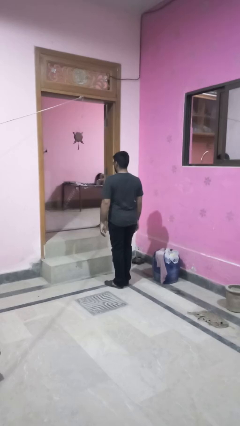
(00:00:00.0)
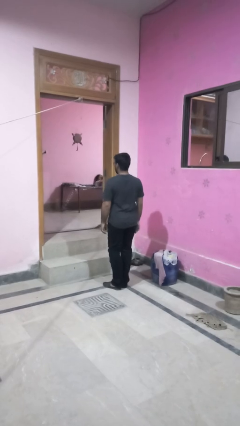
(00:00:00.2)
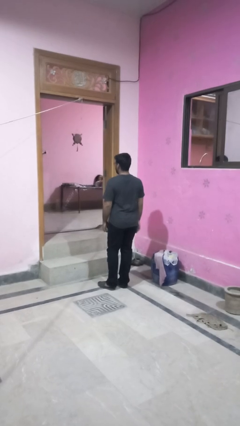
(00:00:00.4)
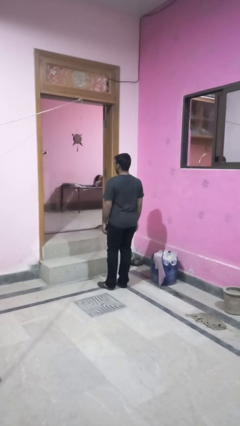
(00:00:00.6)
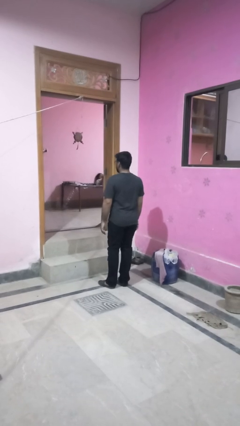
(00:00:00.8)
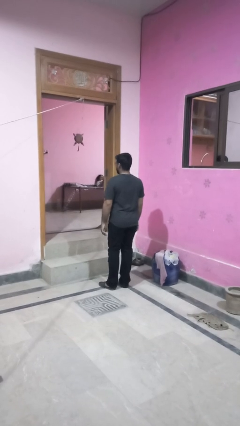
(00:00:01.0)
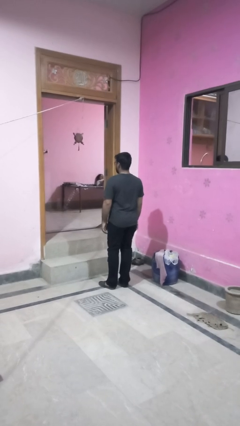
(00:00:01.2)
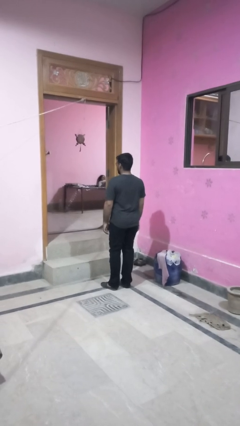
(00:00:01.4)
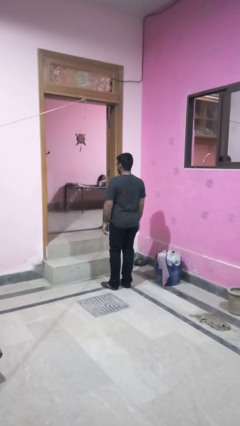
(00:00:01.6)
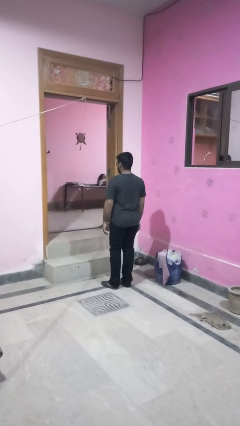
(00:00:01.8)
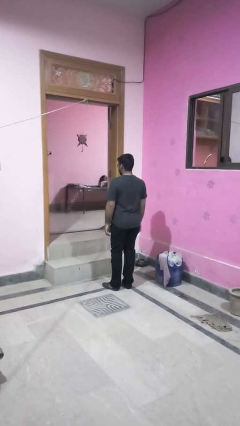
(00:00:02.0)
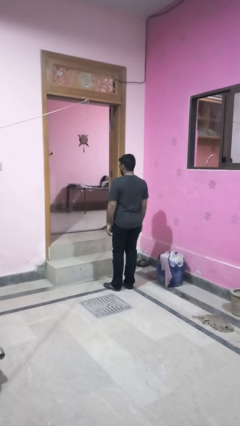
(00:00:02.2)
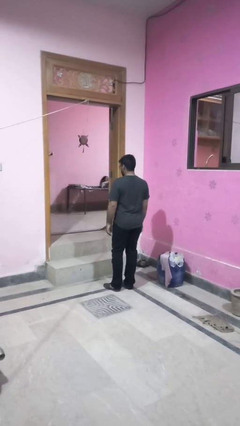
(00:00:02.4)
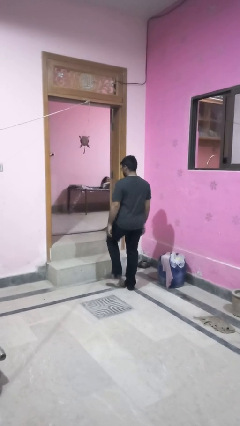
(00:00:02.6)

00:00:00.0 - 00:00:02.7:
person puts on necklace

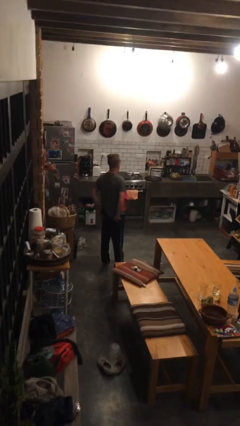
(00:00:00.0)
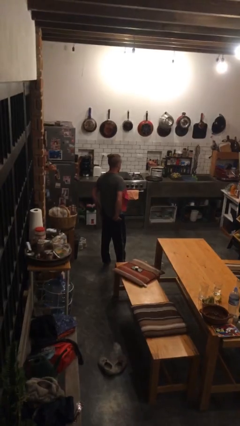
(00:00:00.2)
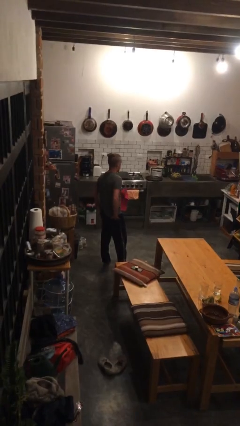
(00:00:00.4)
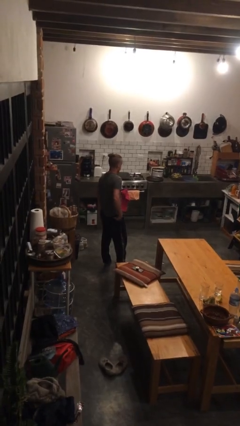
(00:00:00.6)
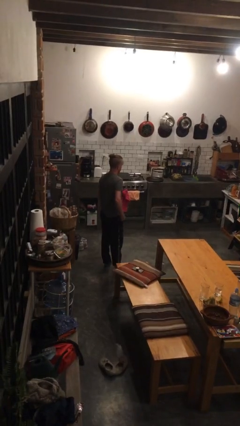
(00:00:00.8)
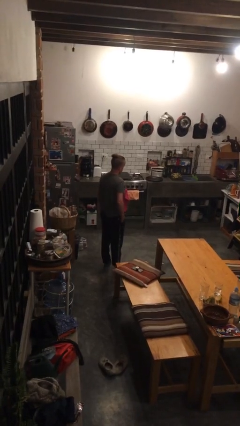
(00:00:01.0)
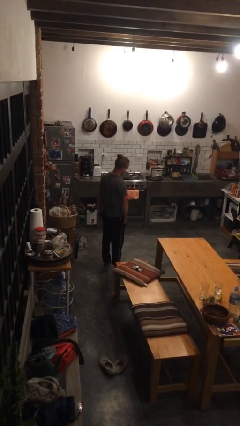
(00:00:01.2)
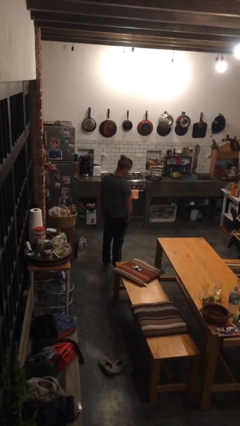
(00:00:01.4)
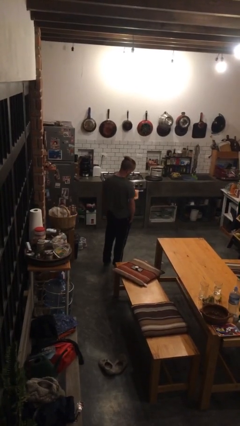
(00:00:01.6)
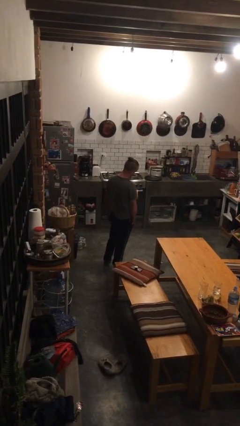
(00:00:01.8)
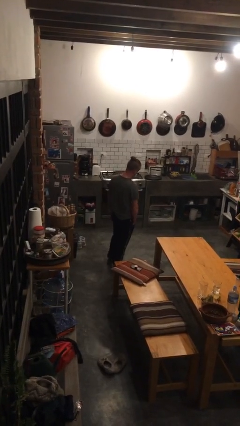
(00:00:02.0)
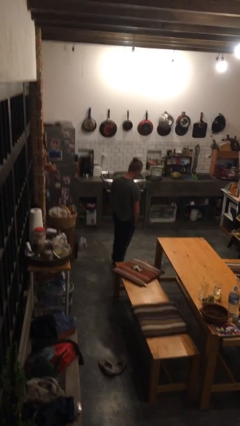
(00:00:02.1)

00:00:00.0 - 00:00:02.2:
person puts hands in back pockets

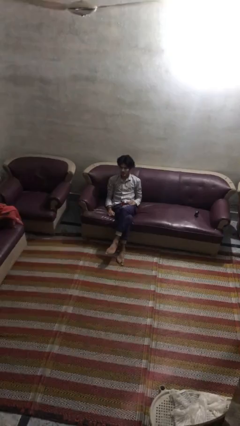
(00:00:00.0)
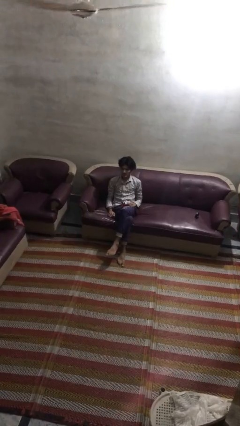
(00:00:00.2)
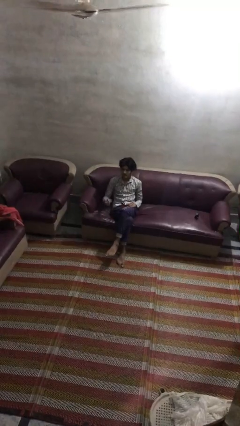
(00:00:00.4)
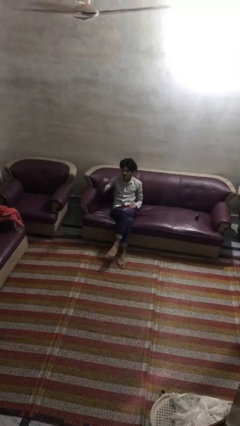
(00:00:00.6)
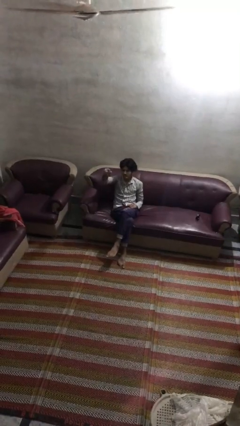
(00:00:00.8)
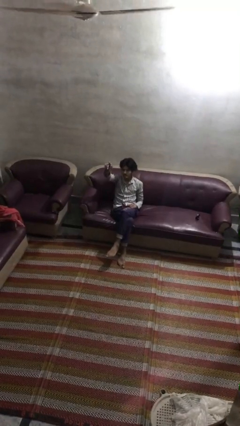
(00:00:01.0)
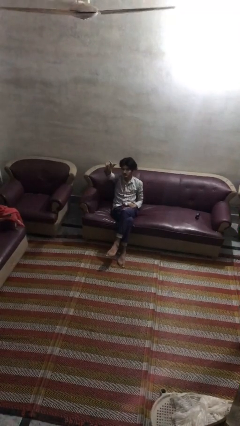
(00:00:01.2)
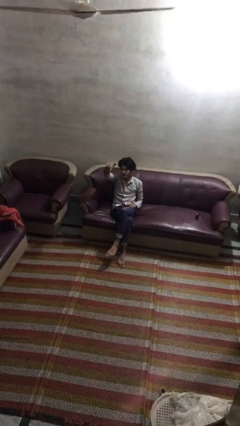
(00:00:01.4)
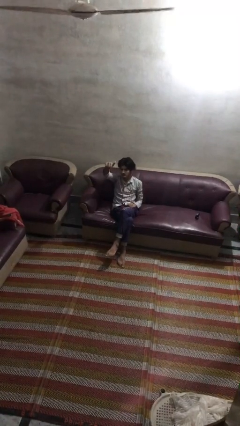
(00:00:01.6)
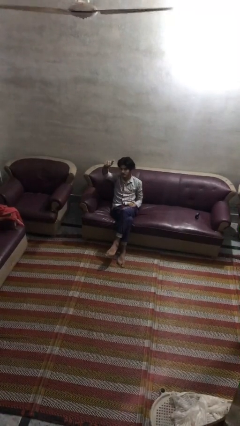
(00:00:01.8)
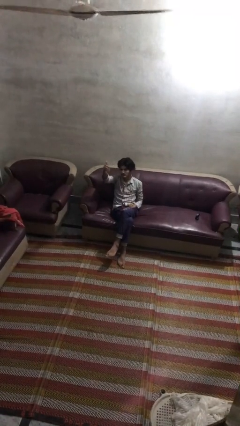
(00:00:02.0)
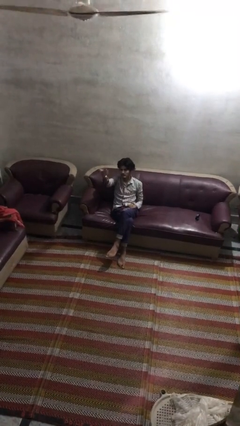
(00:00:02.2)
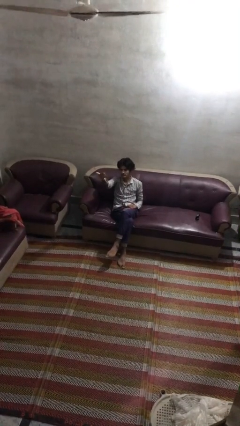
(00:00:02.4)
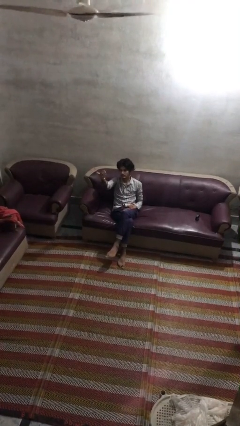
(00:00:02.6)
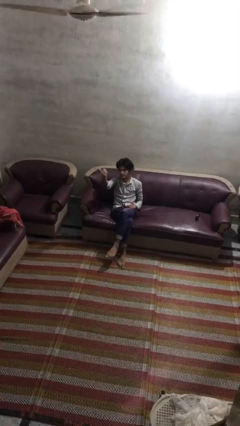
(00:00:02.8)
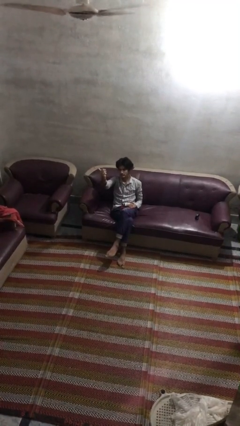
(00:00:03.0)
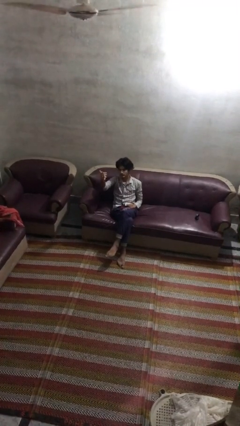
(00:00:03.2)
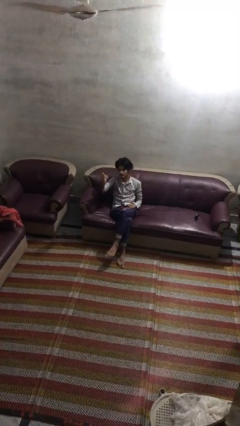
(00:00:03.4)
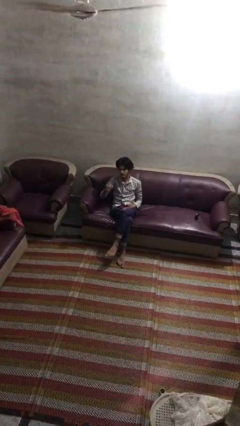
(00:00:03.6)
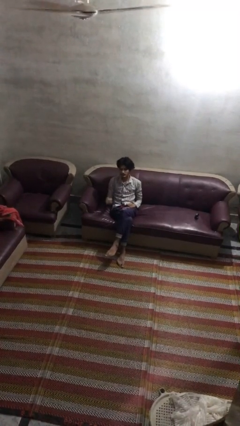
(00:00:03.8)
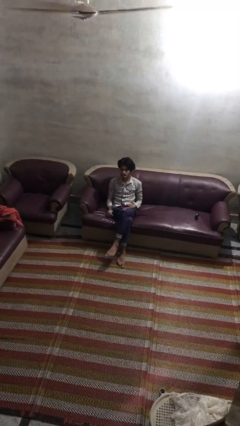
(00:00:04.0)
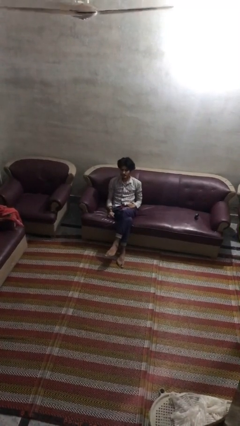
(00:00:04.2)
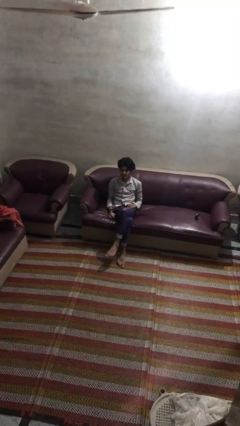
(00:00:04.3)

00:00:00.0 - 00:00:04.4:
person gestures come here

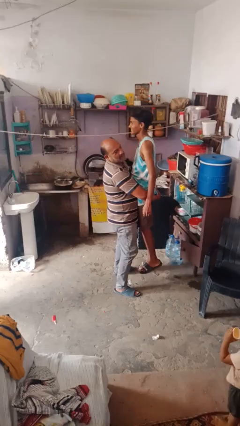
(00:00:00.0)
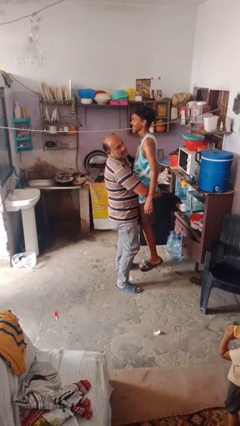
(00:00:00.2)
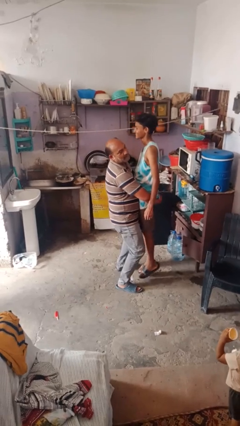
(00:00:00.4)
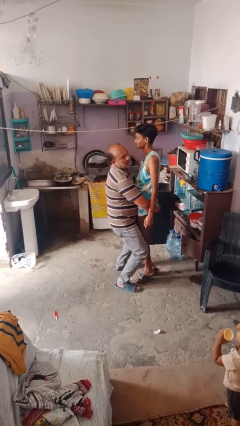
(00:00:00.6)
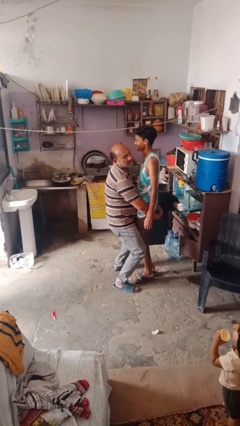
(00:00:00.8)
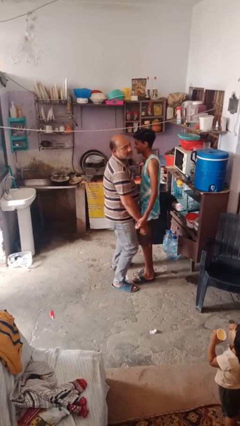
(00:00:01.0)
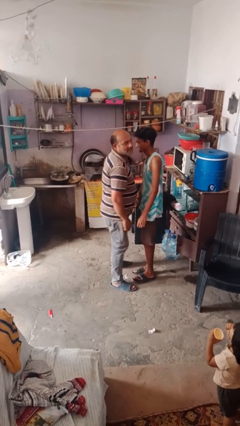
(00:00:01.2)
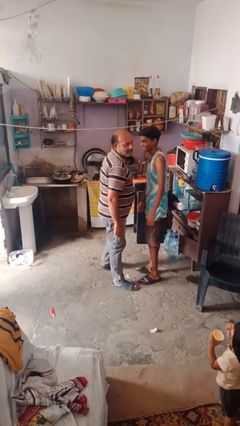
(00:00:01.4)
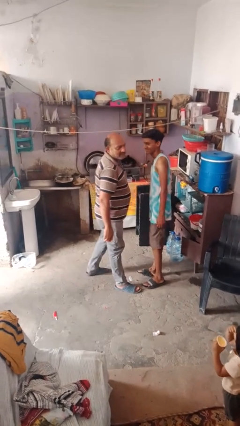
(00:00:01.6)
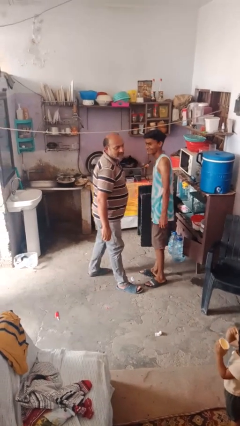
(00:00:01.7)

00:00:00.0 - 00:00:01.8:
person puts down person

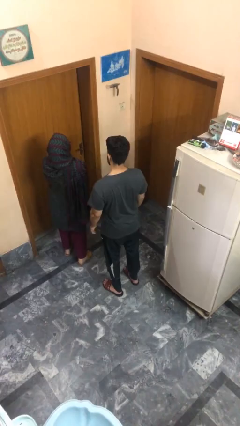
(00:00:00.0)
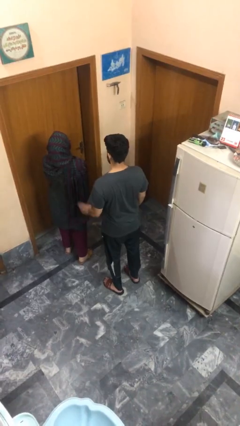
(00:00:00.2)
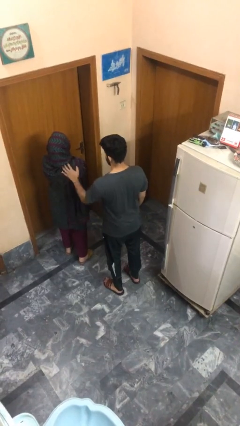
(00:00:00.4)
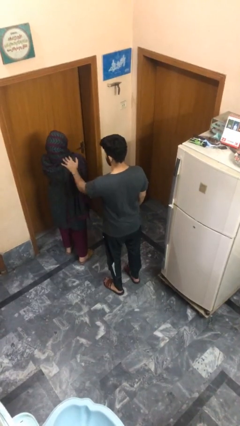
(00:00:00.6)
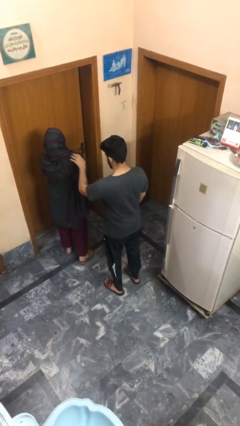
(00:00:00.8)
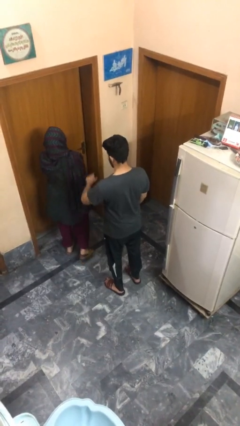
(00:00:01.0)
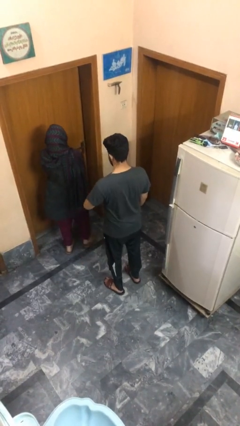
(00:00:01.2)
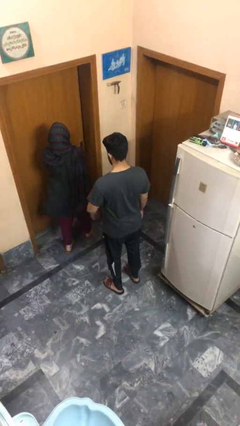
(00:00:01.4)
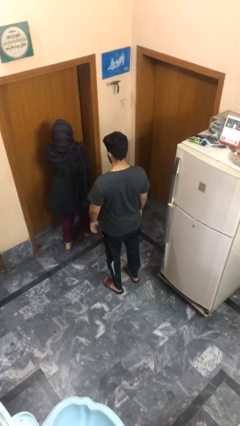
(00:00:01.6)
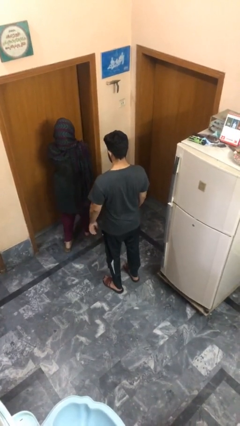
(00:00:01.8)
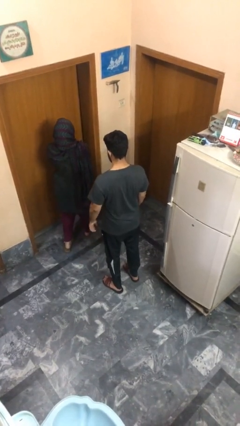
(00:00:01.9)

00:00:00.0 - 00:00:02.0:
person shoves person

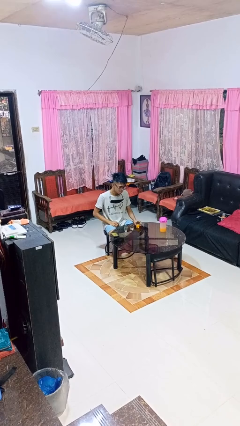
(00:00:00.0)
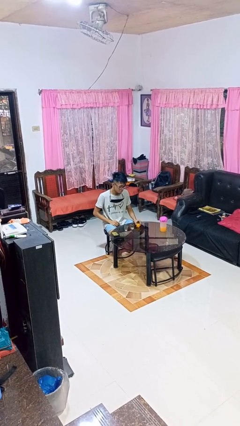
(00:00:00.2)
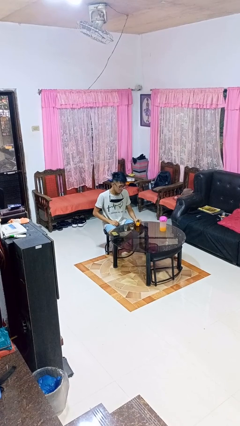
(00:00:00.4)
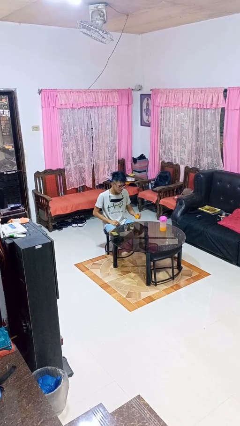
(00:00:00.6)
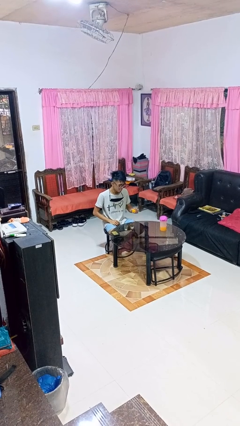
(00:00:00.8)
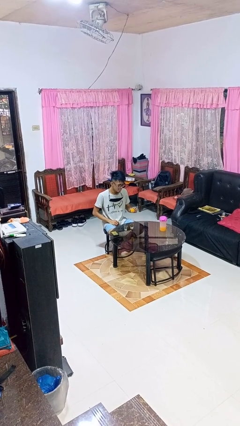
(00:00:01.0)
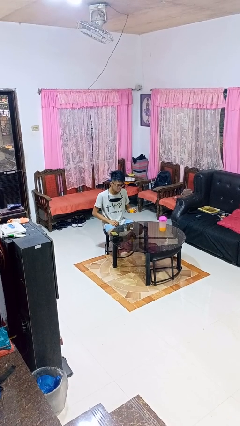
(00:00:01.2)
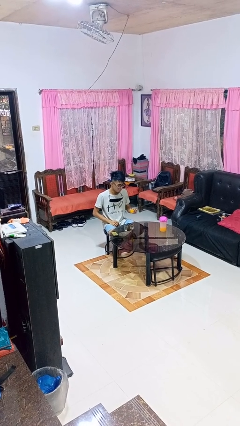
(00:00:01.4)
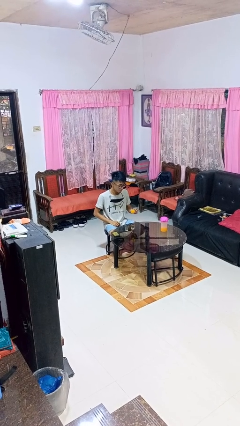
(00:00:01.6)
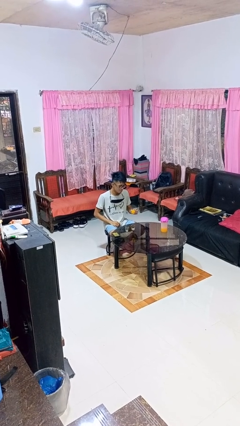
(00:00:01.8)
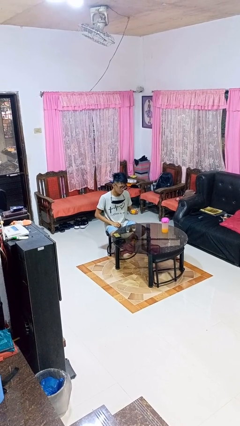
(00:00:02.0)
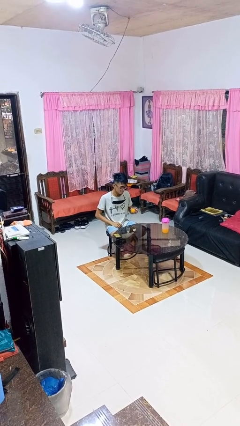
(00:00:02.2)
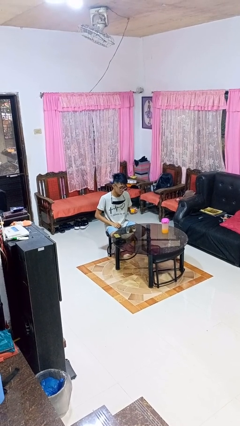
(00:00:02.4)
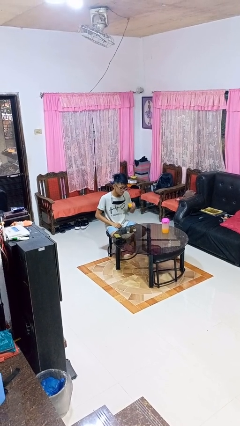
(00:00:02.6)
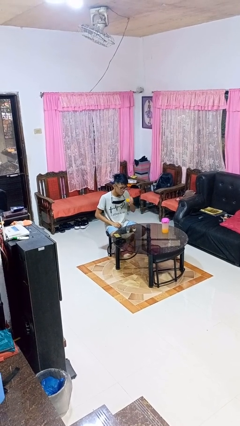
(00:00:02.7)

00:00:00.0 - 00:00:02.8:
person picks up object from table

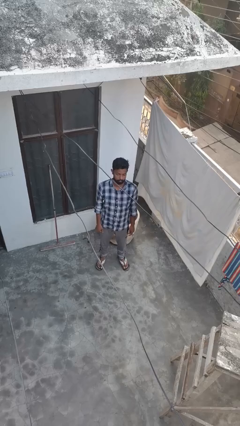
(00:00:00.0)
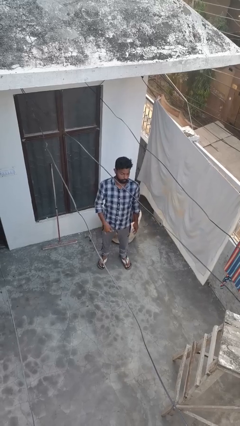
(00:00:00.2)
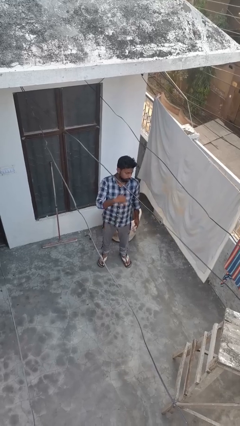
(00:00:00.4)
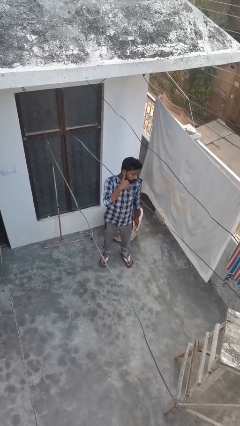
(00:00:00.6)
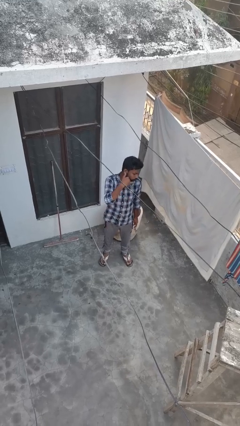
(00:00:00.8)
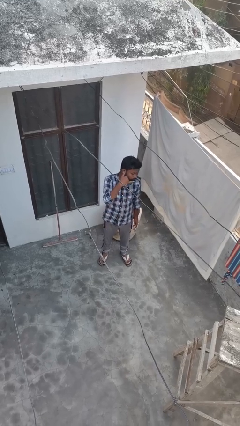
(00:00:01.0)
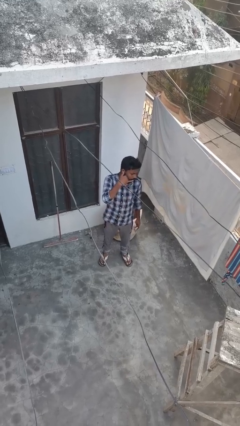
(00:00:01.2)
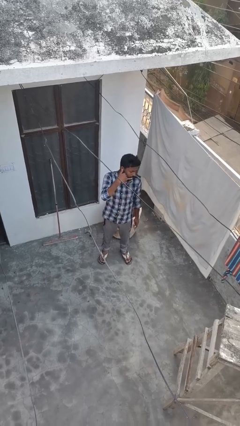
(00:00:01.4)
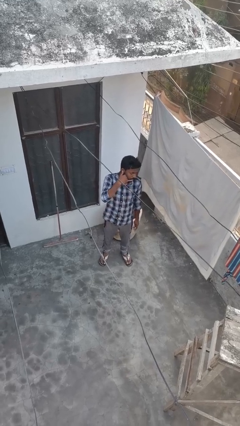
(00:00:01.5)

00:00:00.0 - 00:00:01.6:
person gestures call me
